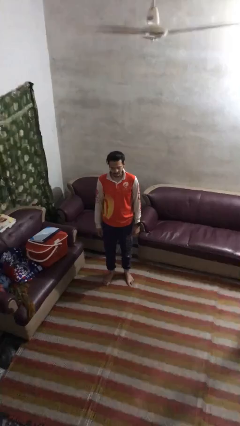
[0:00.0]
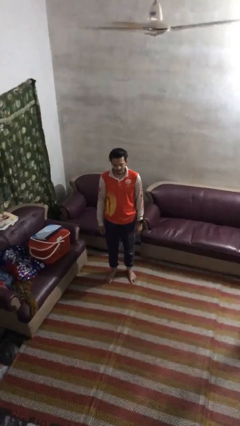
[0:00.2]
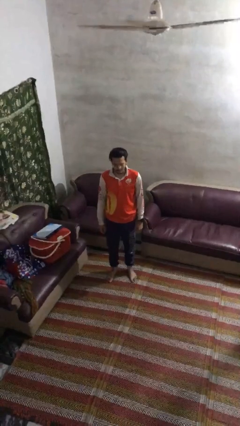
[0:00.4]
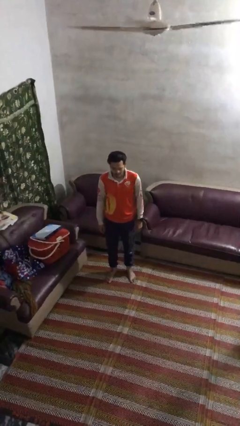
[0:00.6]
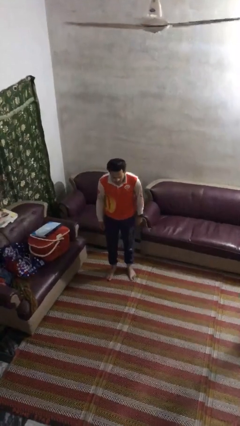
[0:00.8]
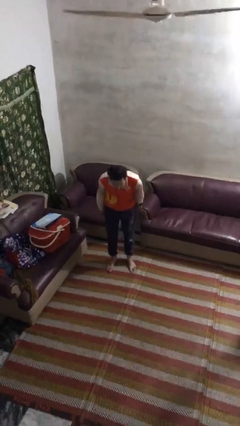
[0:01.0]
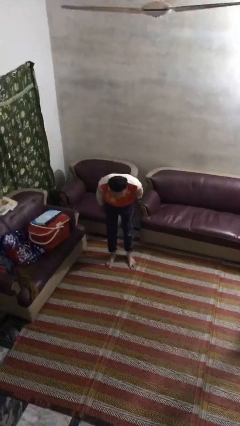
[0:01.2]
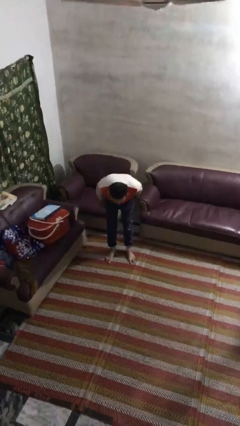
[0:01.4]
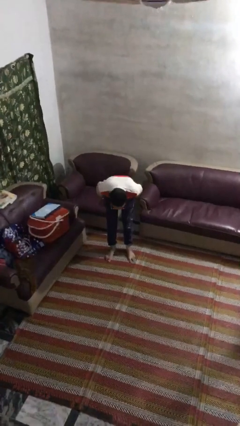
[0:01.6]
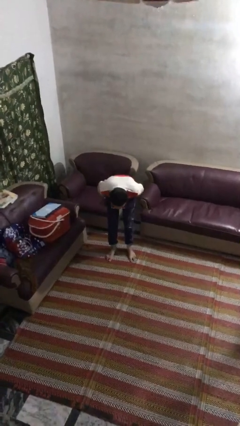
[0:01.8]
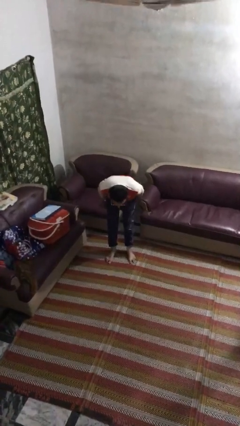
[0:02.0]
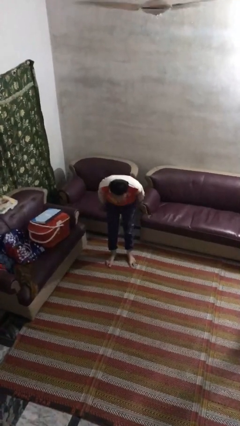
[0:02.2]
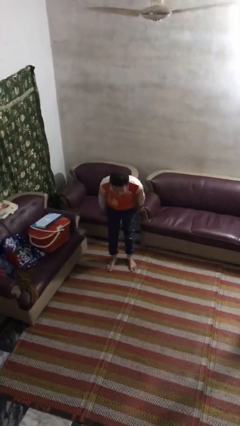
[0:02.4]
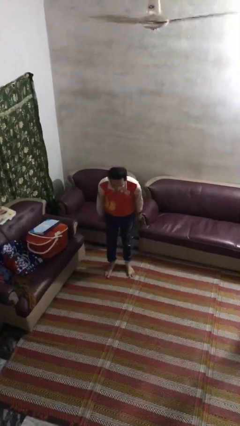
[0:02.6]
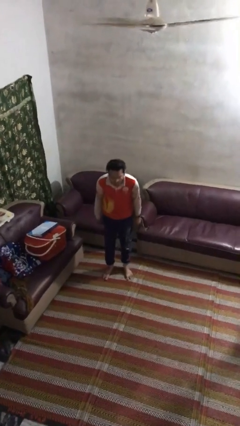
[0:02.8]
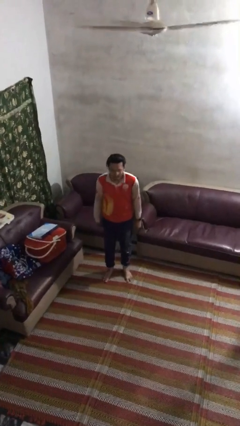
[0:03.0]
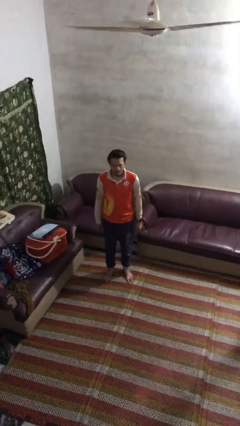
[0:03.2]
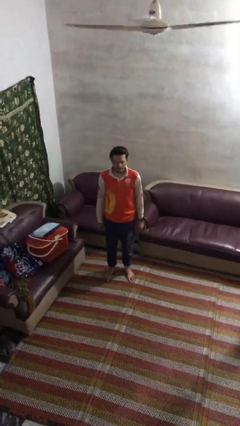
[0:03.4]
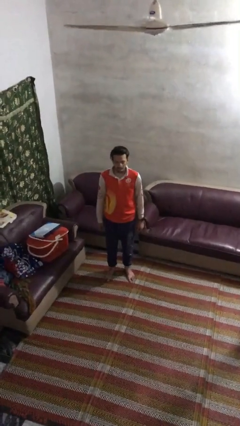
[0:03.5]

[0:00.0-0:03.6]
person bows

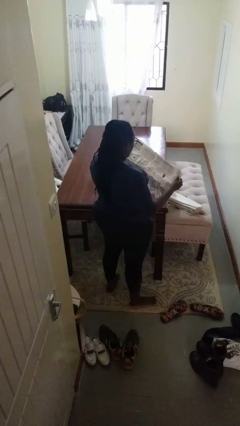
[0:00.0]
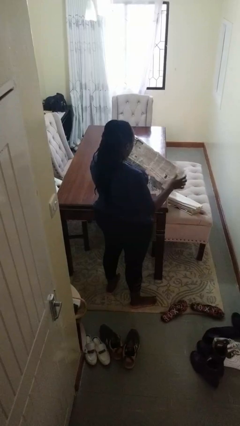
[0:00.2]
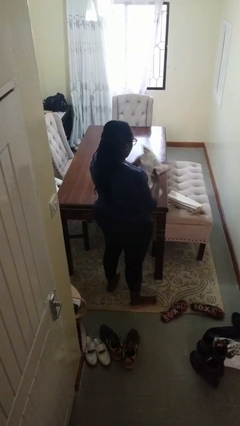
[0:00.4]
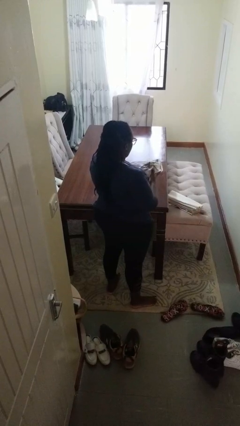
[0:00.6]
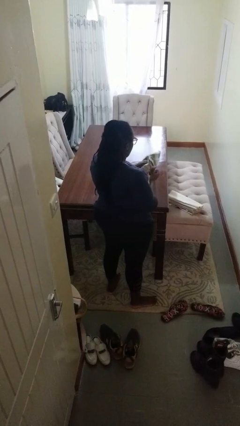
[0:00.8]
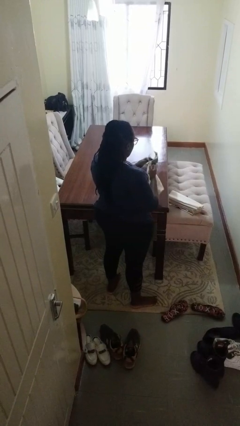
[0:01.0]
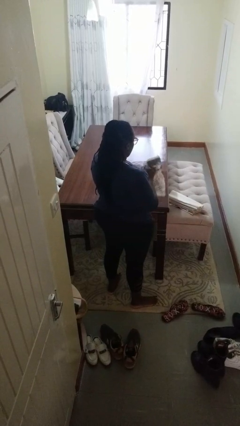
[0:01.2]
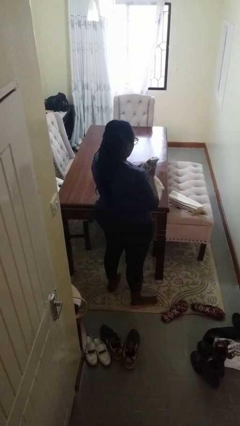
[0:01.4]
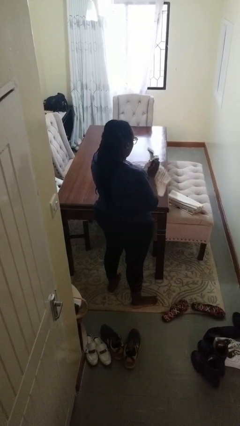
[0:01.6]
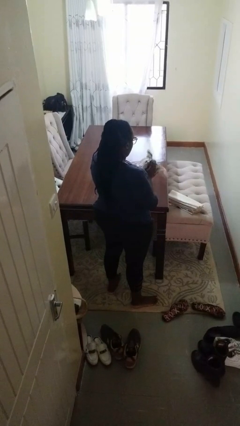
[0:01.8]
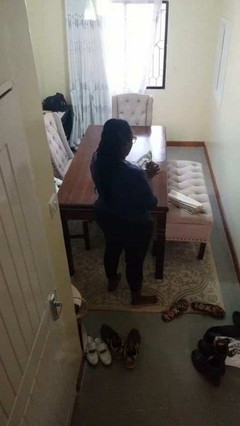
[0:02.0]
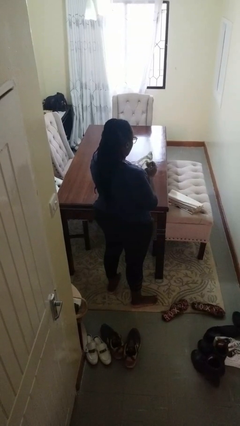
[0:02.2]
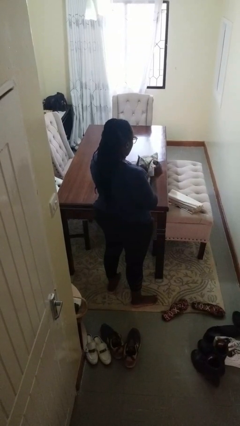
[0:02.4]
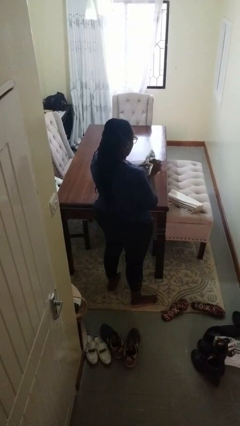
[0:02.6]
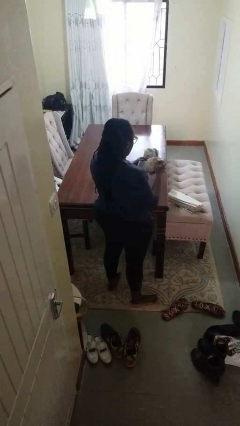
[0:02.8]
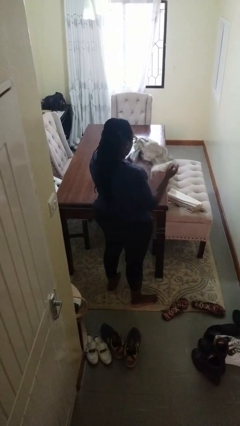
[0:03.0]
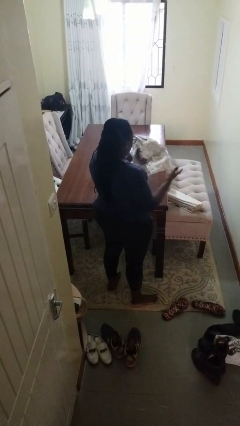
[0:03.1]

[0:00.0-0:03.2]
person crumples paper

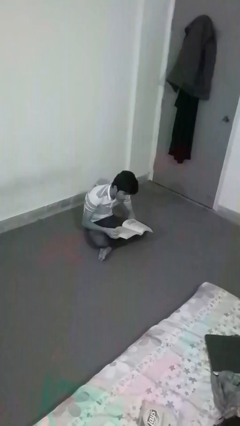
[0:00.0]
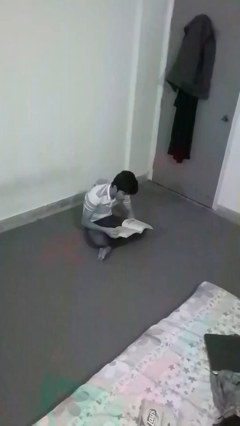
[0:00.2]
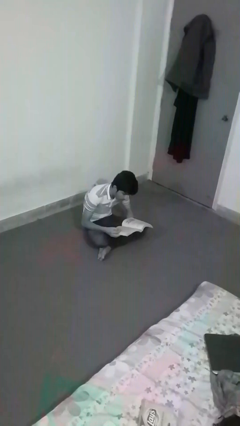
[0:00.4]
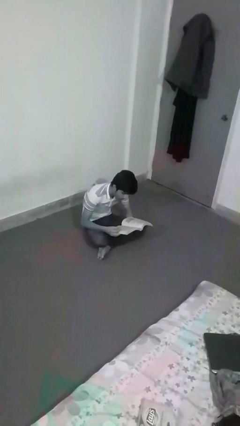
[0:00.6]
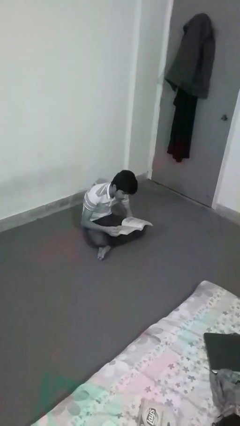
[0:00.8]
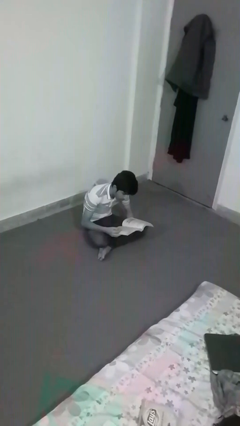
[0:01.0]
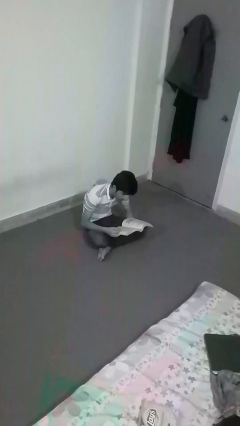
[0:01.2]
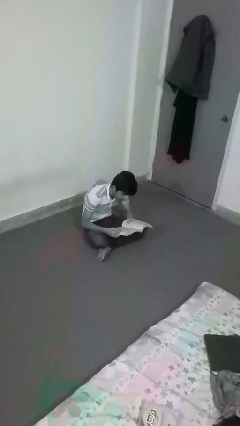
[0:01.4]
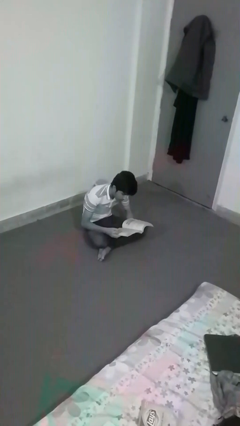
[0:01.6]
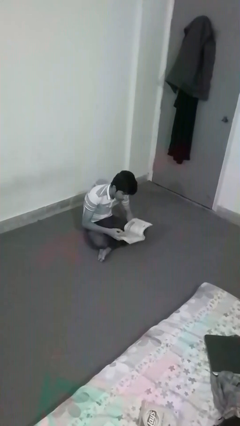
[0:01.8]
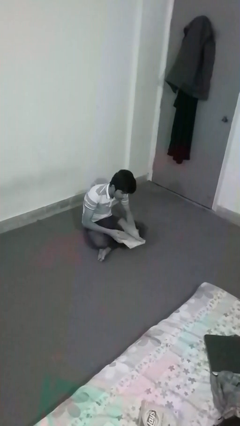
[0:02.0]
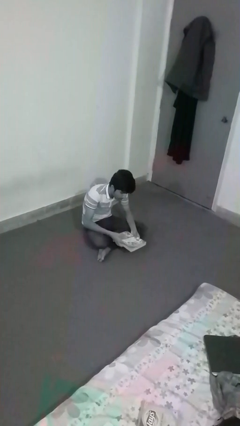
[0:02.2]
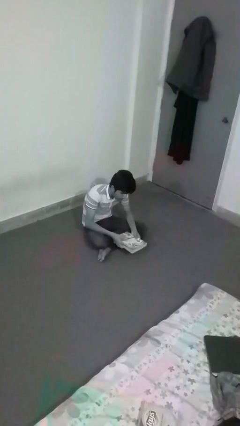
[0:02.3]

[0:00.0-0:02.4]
person reads document

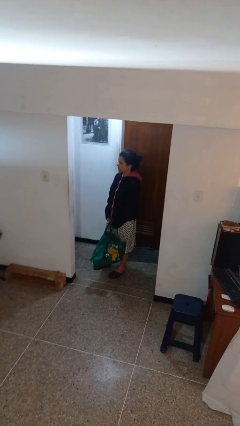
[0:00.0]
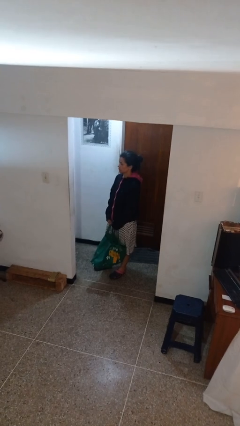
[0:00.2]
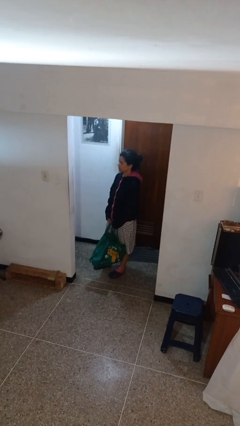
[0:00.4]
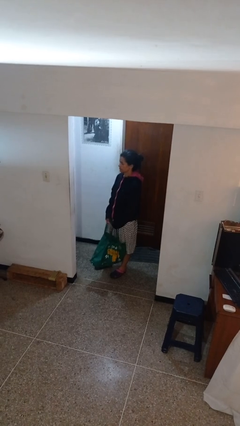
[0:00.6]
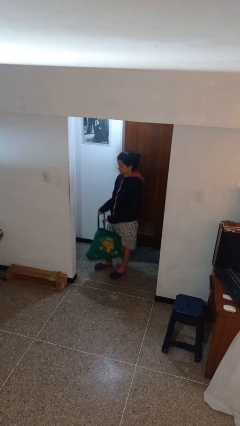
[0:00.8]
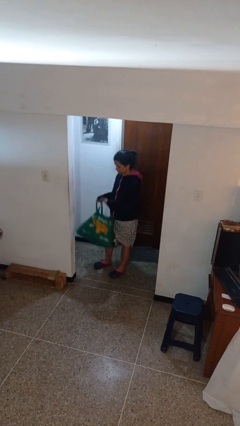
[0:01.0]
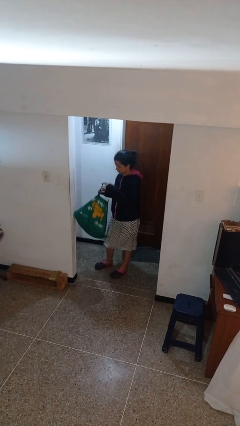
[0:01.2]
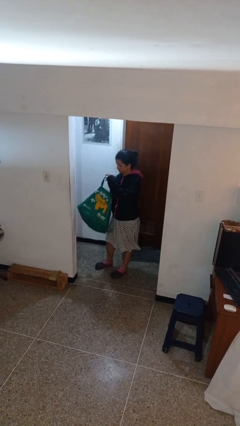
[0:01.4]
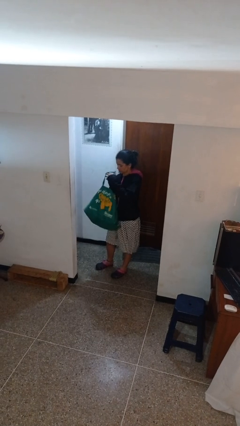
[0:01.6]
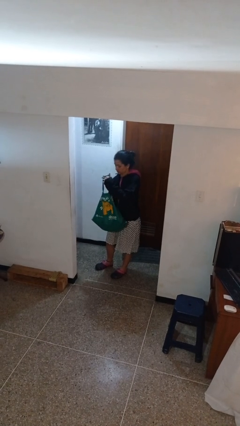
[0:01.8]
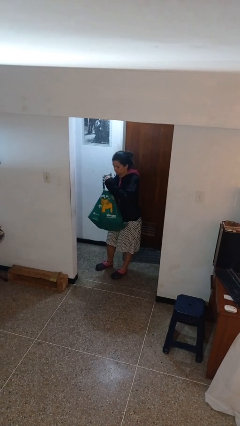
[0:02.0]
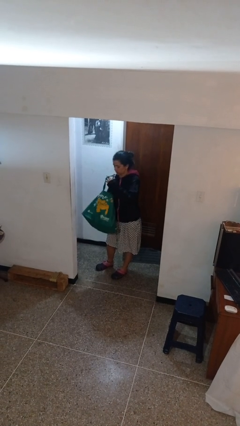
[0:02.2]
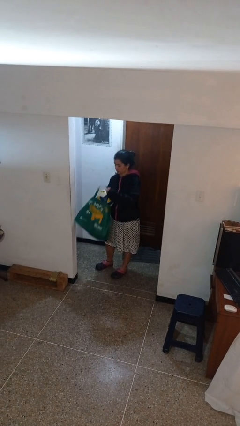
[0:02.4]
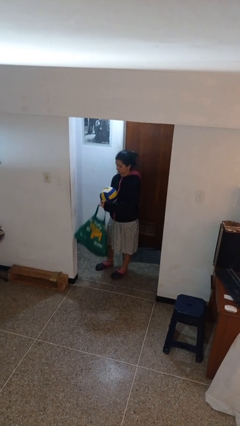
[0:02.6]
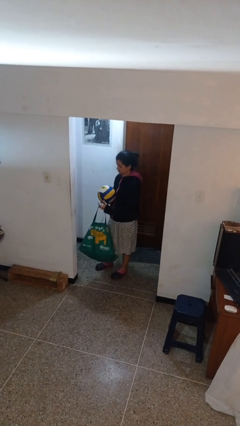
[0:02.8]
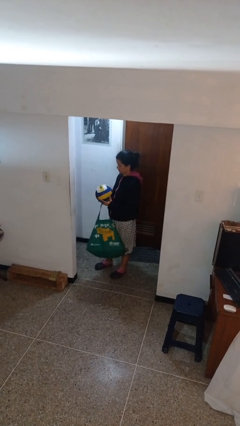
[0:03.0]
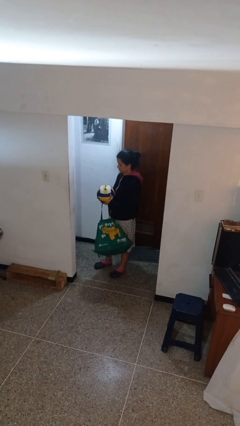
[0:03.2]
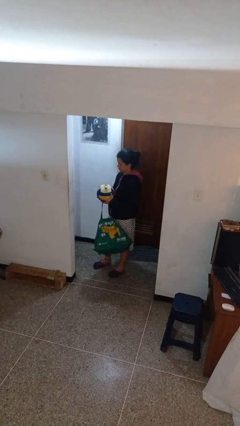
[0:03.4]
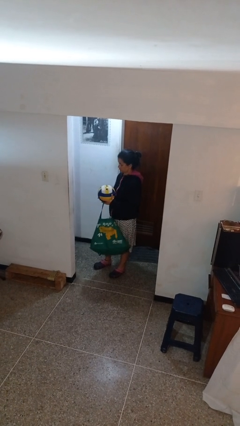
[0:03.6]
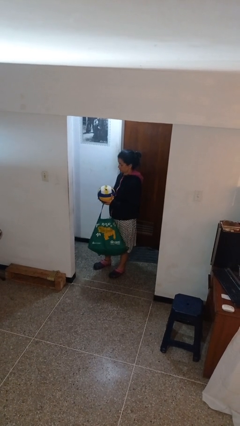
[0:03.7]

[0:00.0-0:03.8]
person takes object from bag

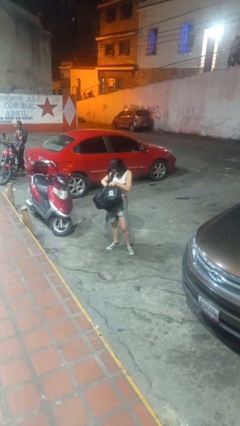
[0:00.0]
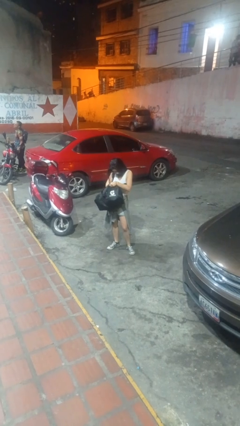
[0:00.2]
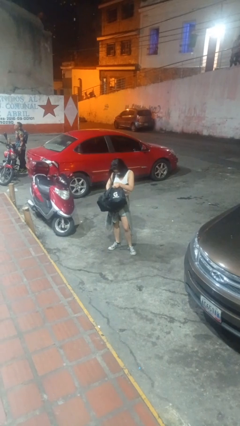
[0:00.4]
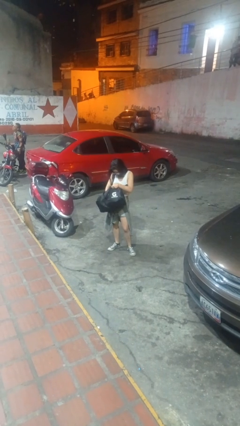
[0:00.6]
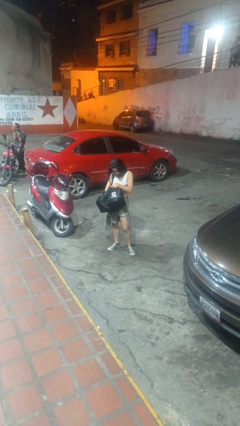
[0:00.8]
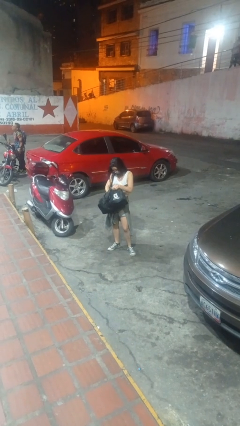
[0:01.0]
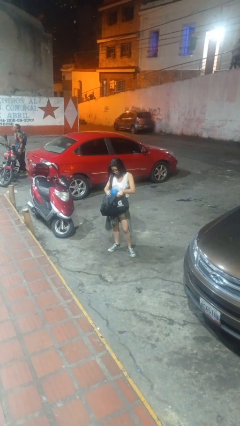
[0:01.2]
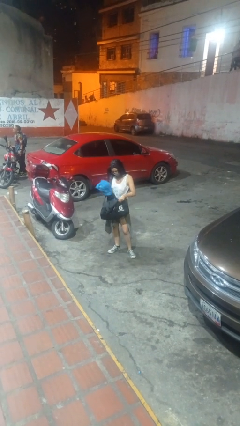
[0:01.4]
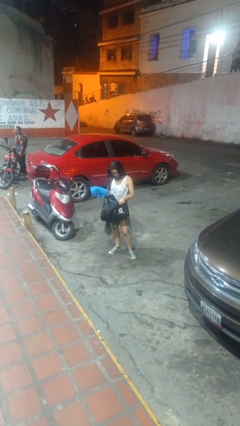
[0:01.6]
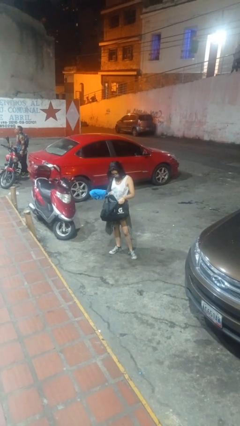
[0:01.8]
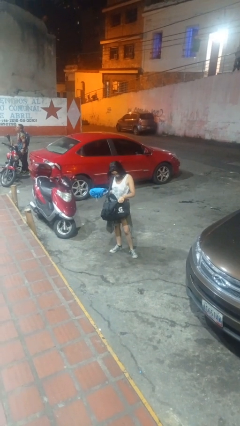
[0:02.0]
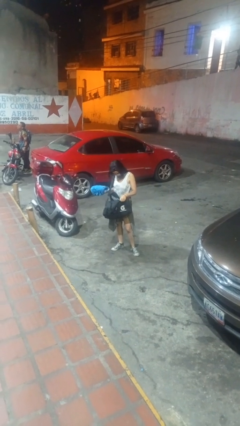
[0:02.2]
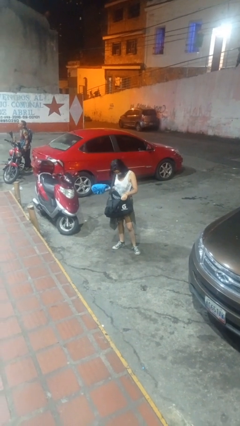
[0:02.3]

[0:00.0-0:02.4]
person takes object from purse

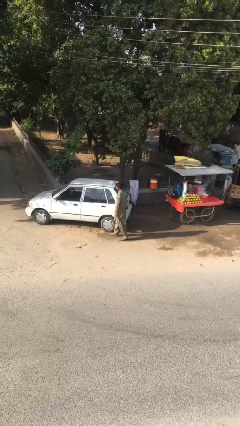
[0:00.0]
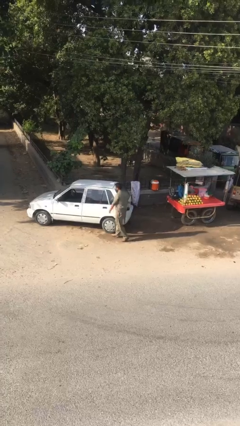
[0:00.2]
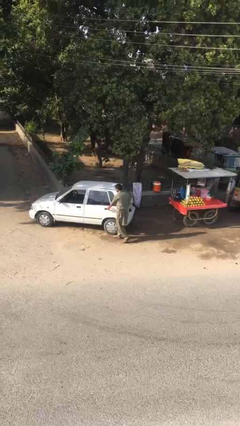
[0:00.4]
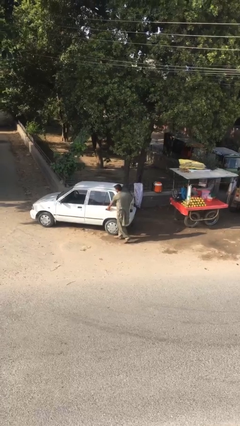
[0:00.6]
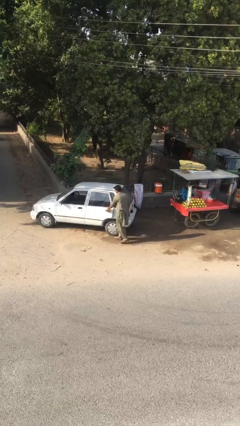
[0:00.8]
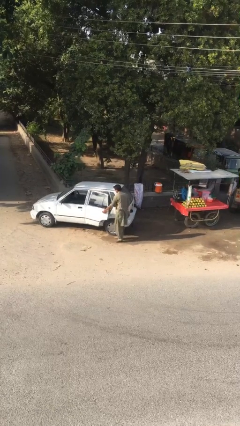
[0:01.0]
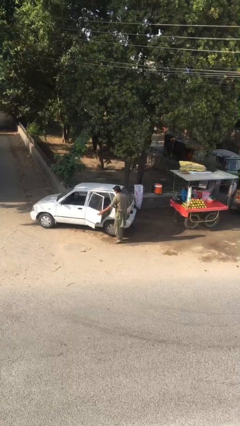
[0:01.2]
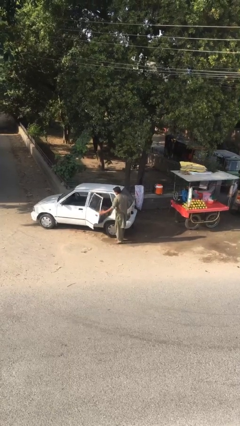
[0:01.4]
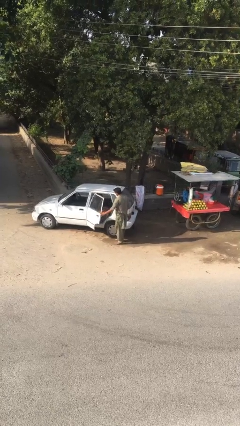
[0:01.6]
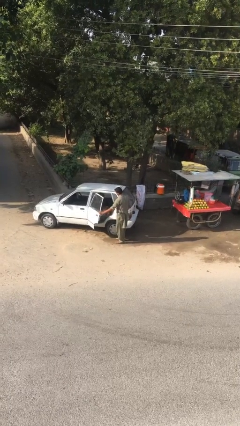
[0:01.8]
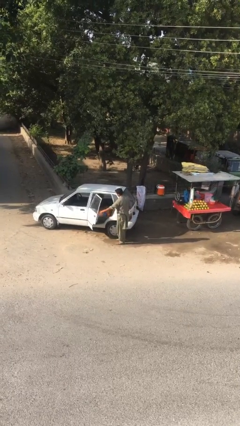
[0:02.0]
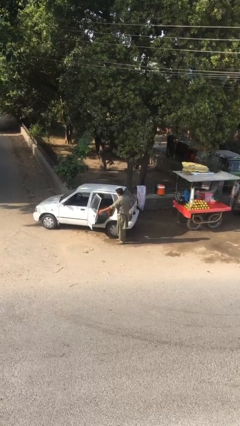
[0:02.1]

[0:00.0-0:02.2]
person opens car door
